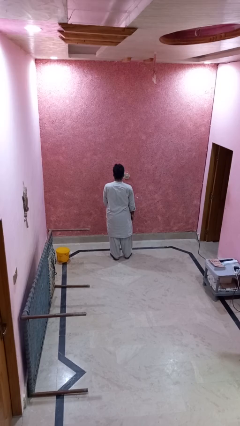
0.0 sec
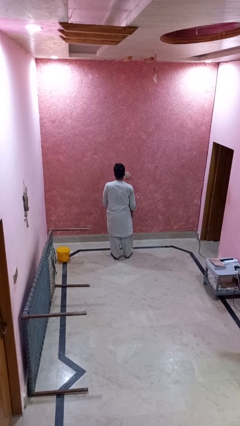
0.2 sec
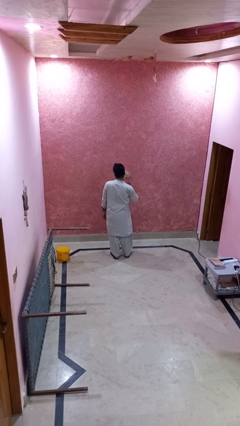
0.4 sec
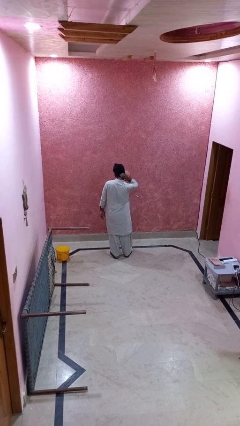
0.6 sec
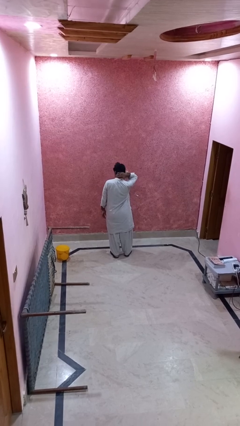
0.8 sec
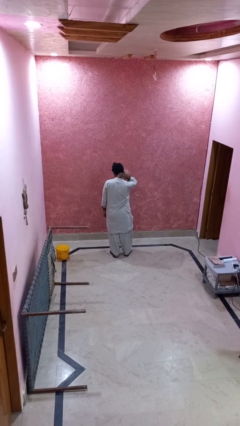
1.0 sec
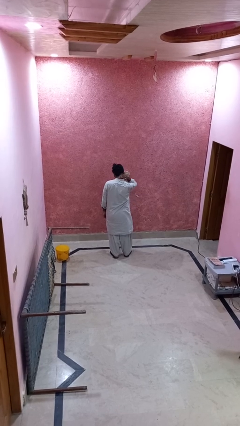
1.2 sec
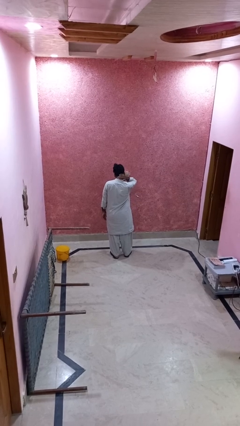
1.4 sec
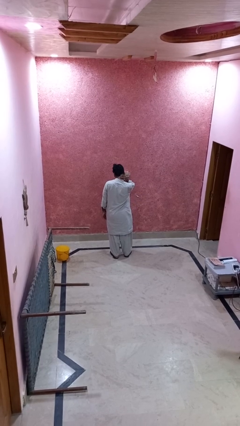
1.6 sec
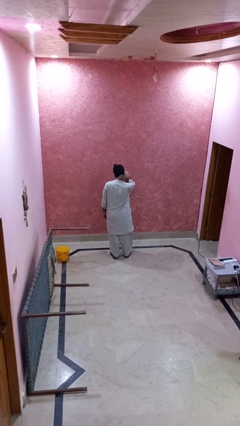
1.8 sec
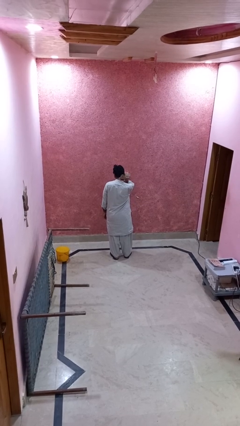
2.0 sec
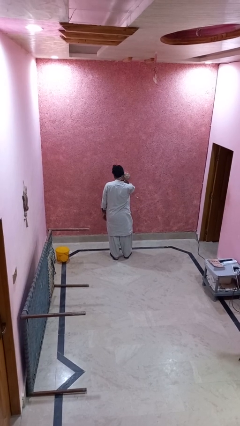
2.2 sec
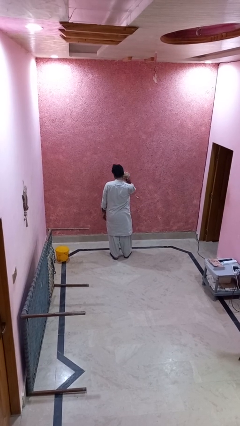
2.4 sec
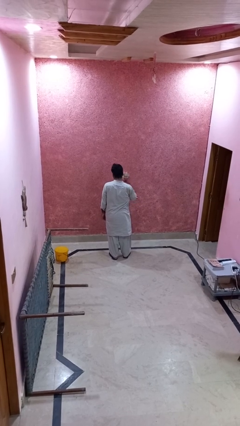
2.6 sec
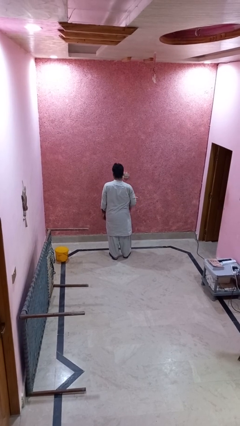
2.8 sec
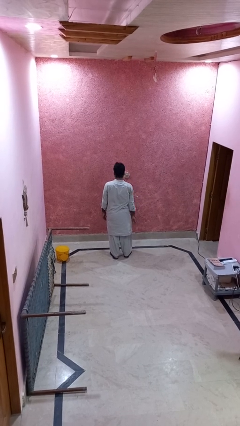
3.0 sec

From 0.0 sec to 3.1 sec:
person rubs neck

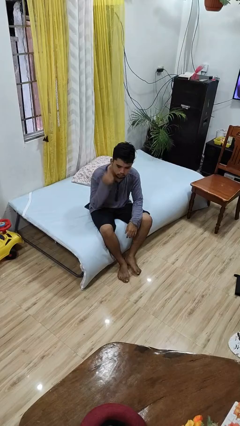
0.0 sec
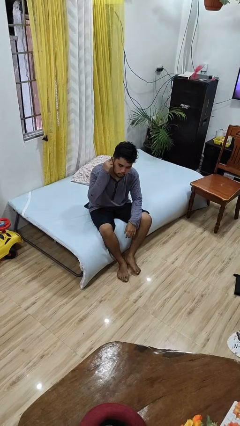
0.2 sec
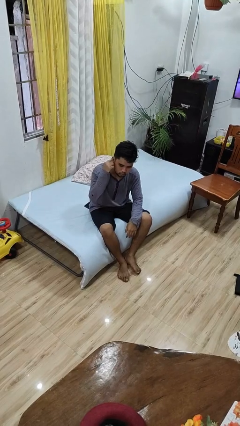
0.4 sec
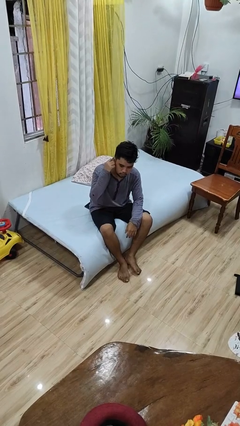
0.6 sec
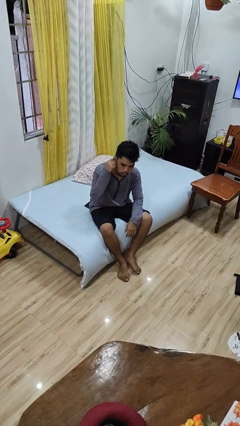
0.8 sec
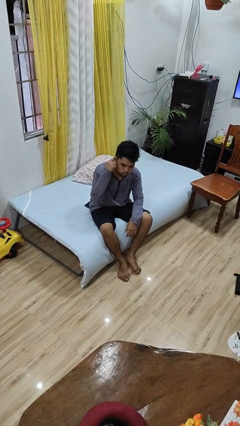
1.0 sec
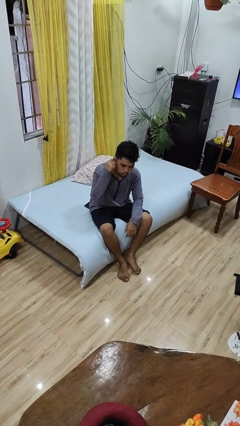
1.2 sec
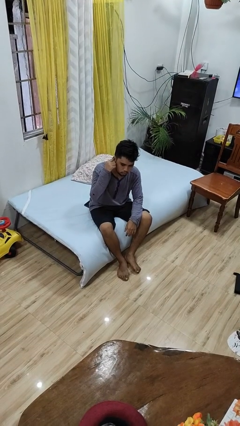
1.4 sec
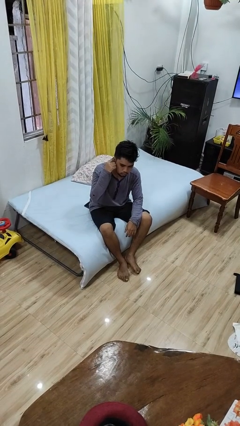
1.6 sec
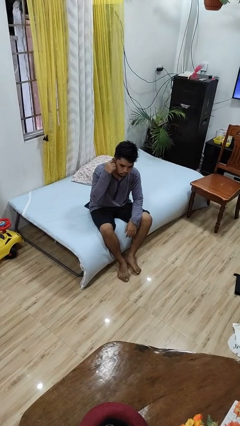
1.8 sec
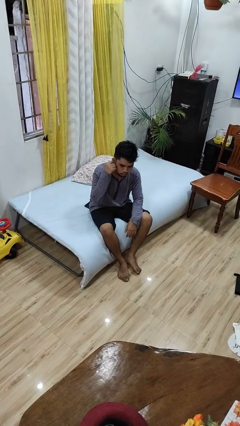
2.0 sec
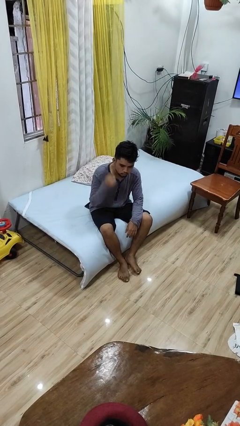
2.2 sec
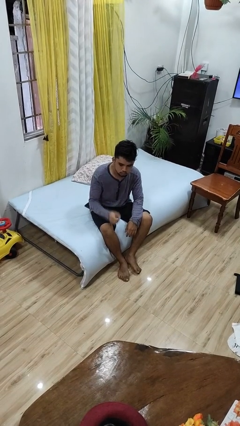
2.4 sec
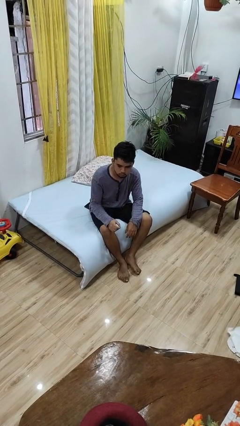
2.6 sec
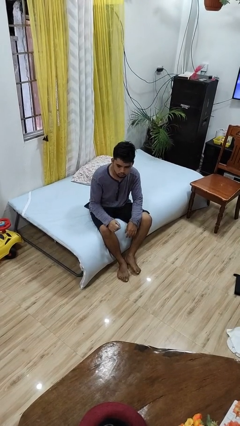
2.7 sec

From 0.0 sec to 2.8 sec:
person touches earlobe

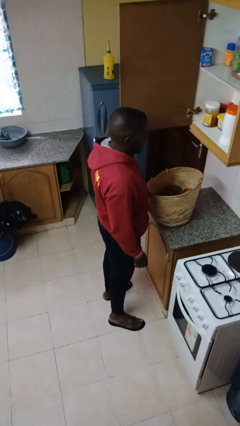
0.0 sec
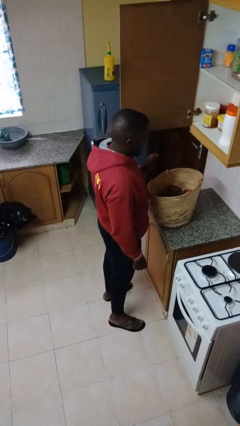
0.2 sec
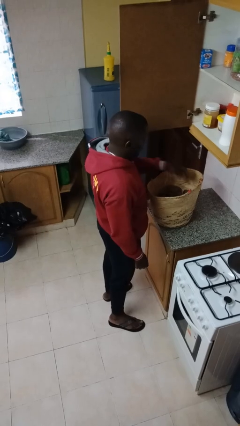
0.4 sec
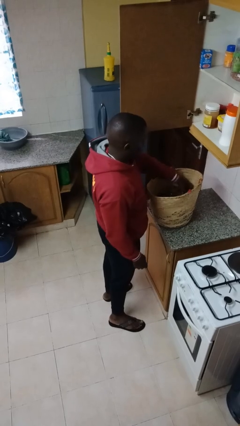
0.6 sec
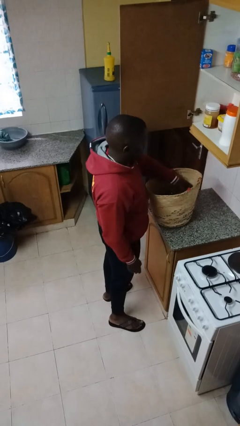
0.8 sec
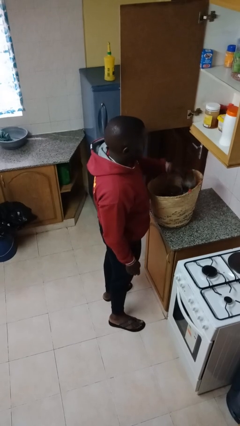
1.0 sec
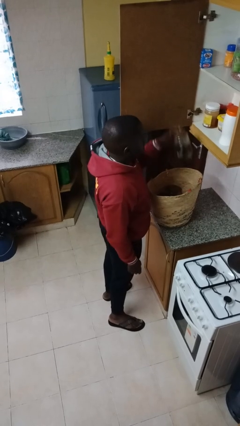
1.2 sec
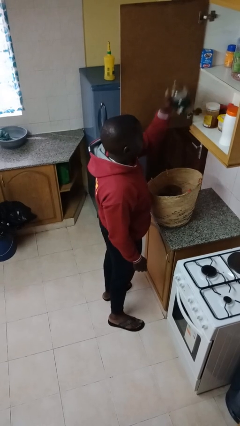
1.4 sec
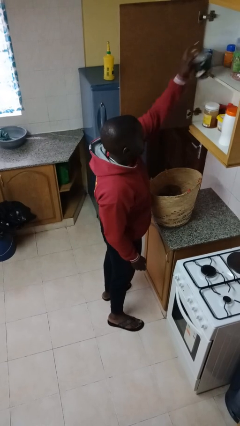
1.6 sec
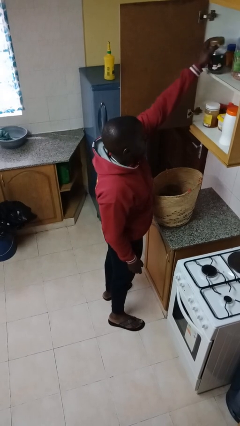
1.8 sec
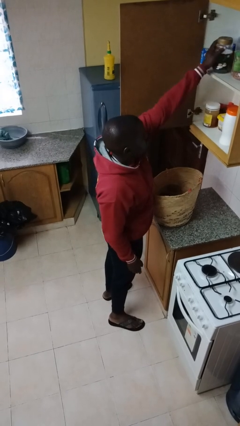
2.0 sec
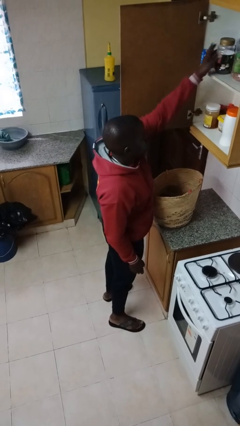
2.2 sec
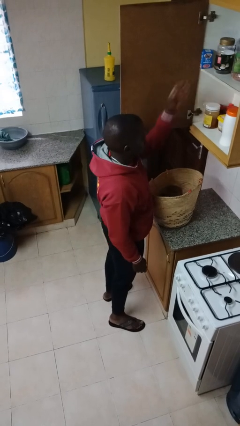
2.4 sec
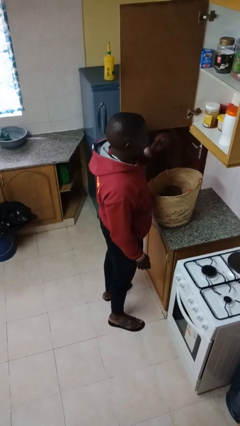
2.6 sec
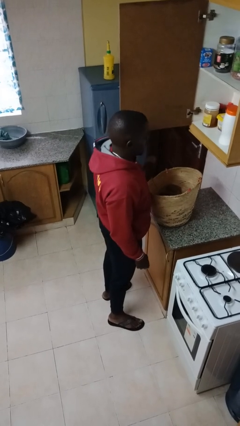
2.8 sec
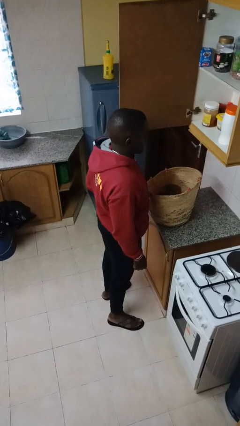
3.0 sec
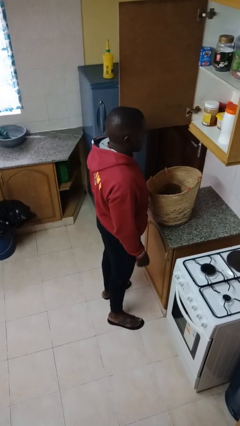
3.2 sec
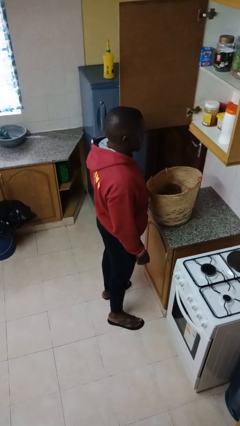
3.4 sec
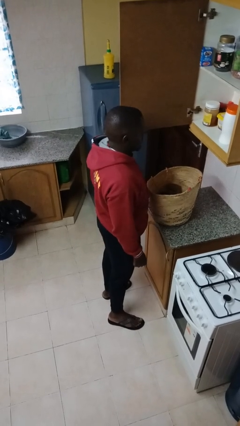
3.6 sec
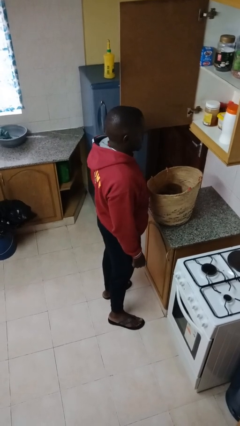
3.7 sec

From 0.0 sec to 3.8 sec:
person loads groceries into cabinet

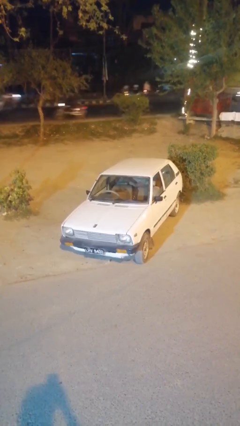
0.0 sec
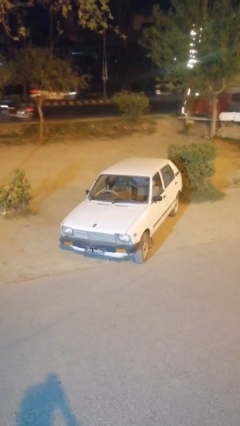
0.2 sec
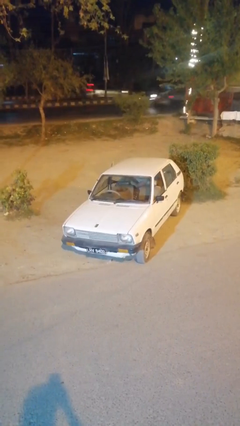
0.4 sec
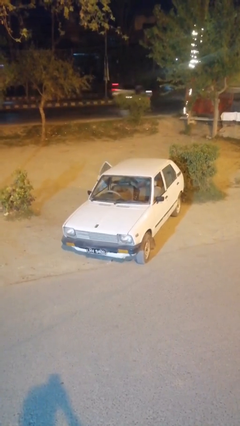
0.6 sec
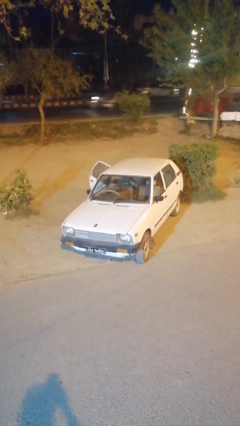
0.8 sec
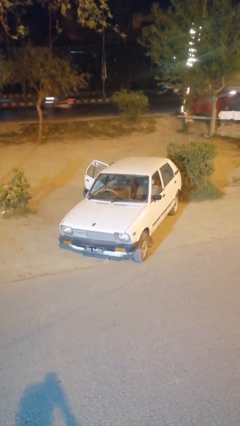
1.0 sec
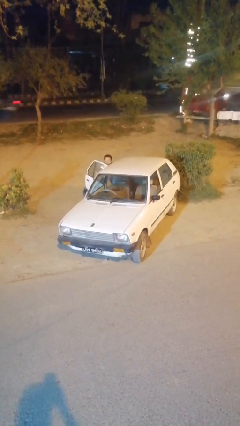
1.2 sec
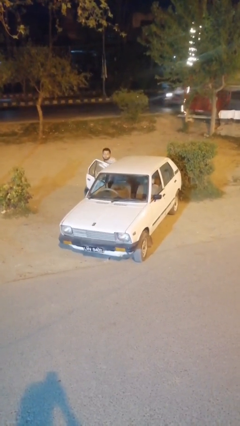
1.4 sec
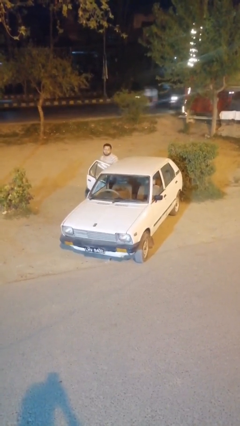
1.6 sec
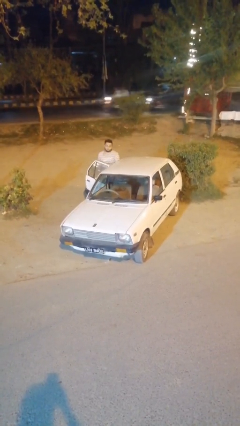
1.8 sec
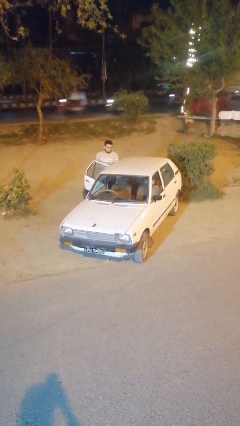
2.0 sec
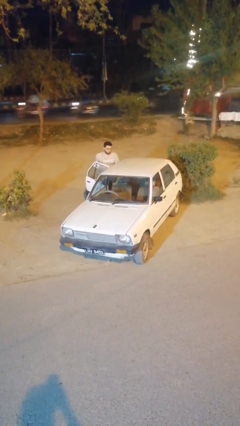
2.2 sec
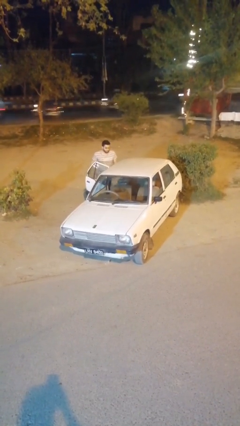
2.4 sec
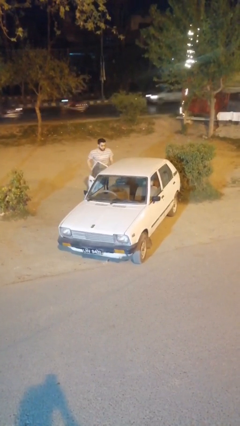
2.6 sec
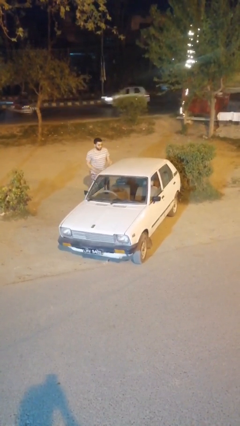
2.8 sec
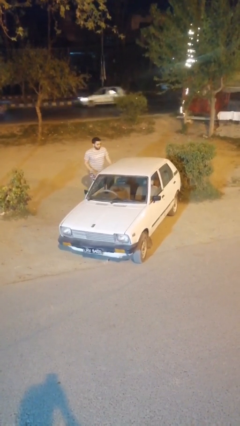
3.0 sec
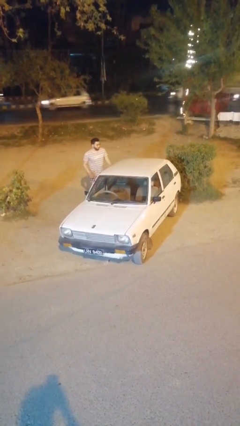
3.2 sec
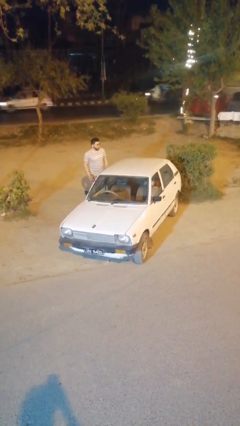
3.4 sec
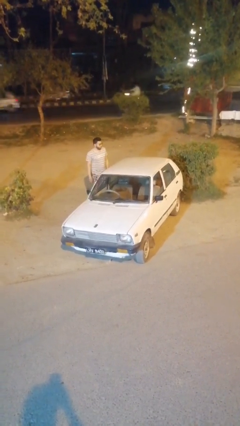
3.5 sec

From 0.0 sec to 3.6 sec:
car drops off person

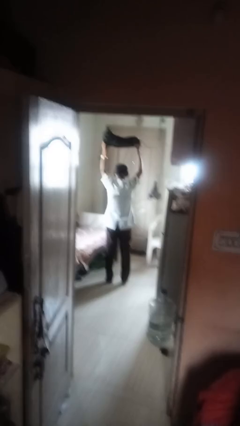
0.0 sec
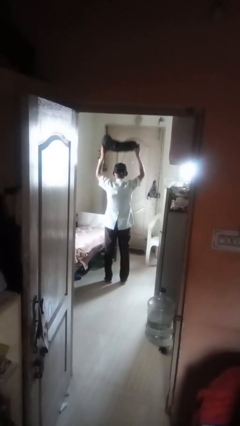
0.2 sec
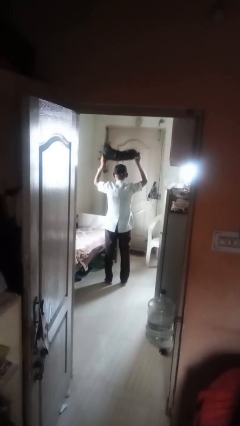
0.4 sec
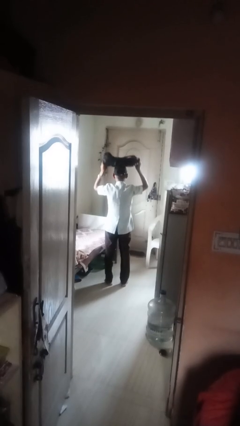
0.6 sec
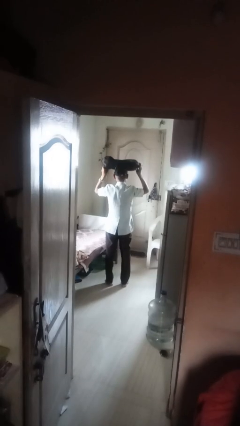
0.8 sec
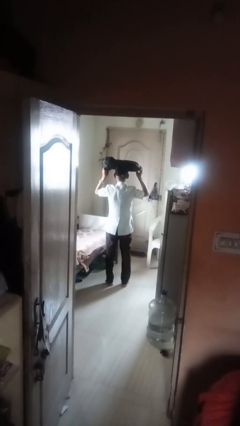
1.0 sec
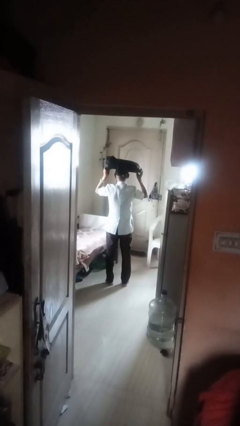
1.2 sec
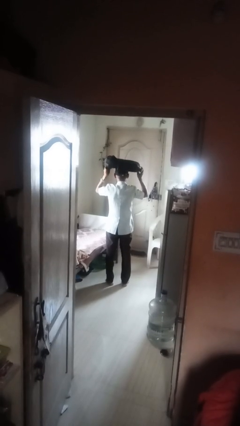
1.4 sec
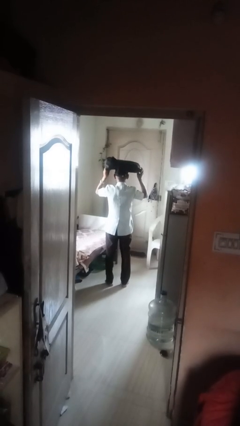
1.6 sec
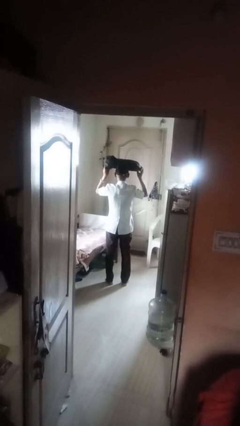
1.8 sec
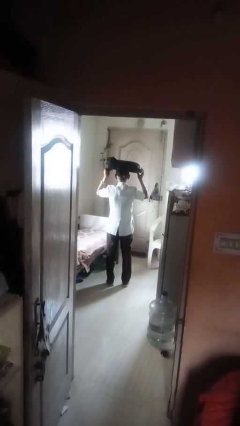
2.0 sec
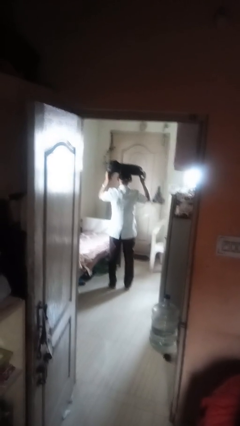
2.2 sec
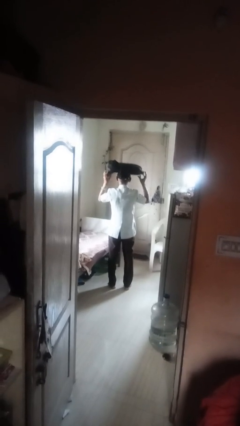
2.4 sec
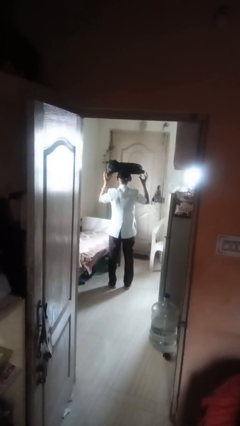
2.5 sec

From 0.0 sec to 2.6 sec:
person holds object above head

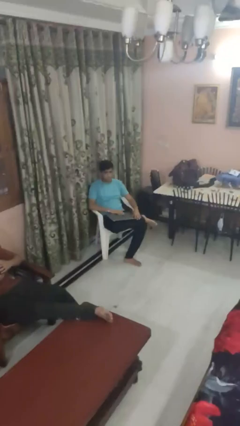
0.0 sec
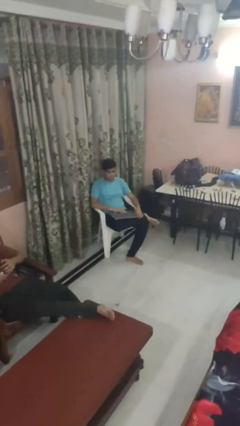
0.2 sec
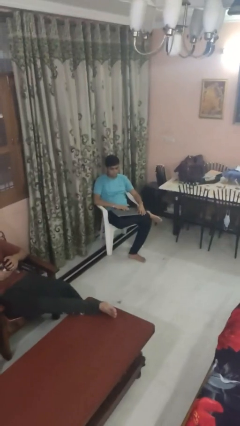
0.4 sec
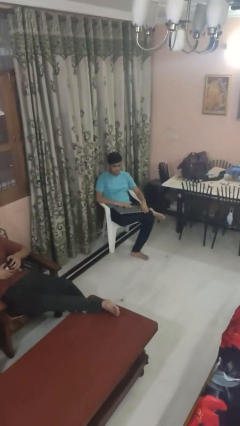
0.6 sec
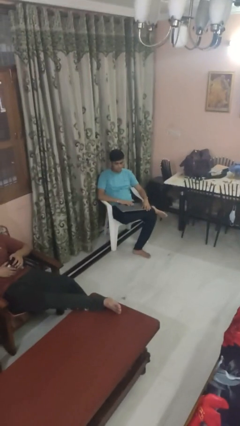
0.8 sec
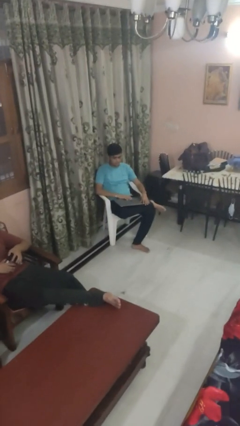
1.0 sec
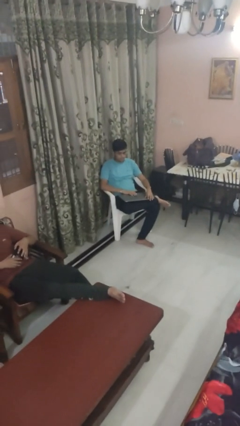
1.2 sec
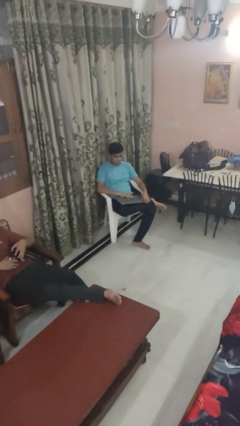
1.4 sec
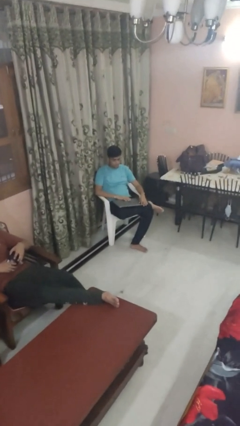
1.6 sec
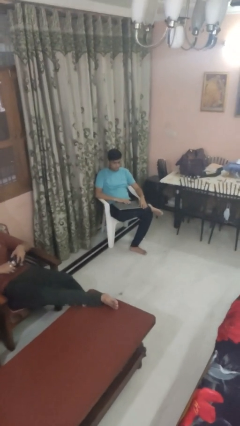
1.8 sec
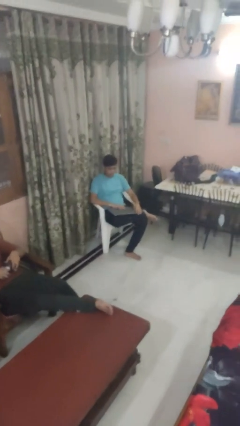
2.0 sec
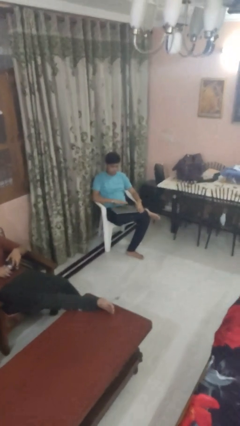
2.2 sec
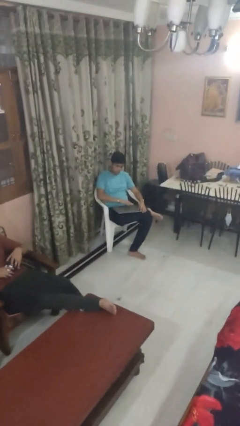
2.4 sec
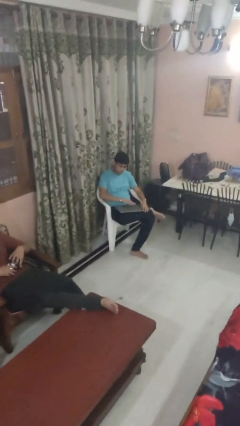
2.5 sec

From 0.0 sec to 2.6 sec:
person waves hand over object
